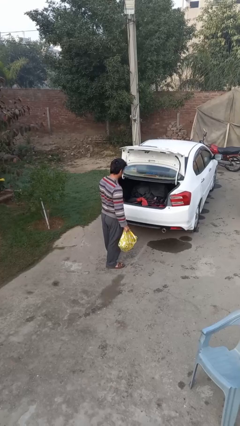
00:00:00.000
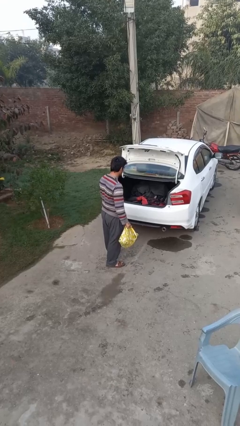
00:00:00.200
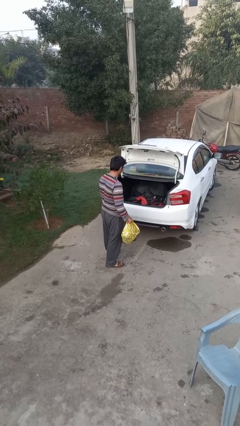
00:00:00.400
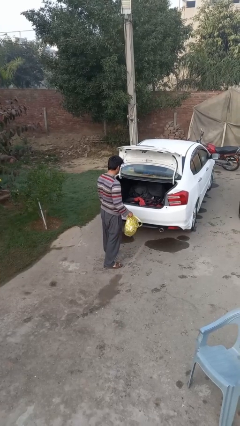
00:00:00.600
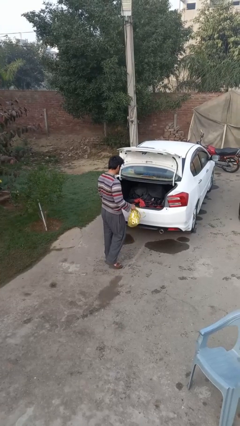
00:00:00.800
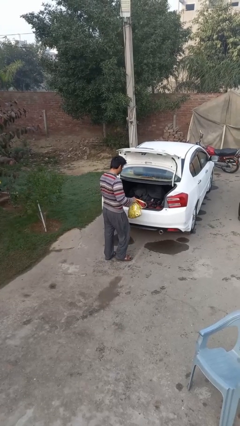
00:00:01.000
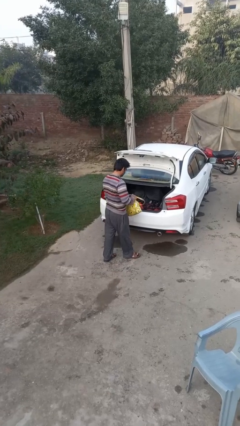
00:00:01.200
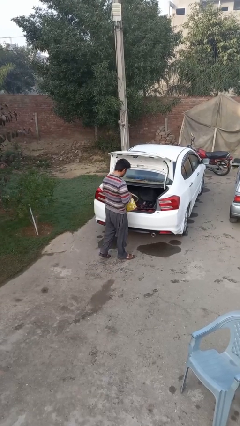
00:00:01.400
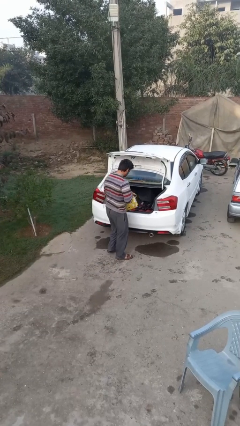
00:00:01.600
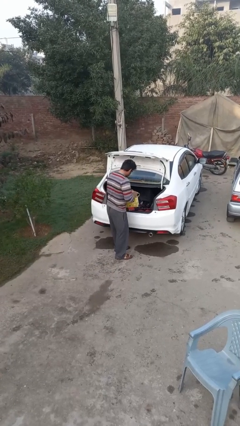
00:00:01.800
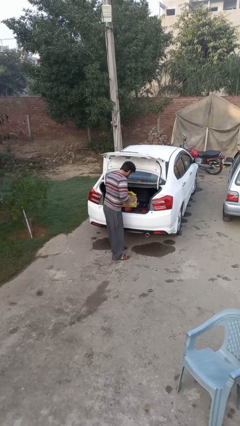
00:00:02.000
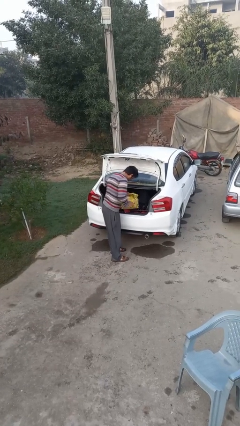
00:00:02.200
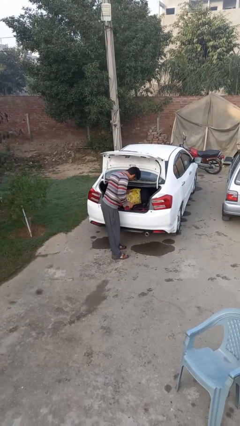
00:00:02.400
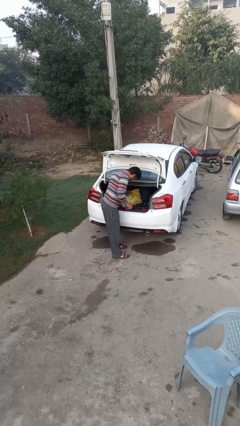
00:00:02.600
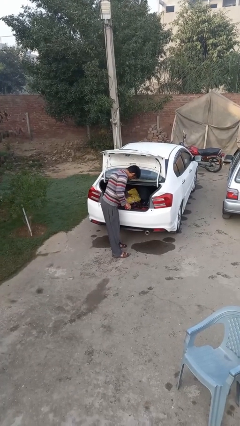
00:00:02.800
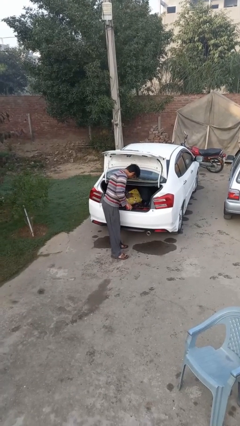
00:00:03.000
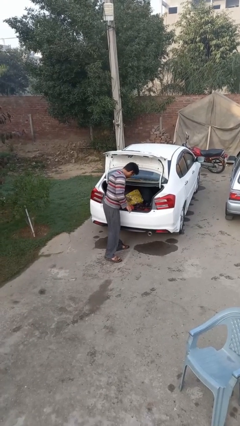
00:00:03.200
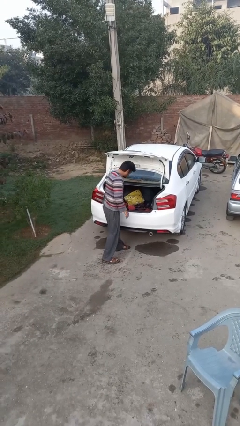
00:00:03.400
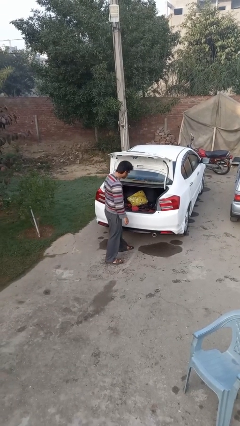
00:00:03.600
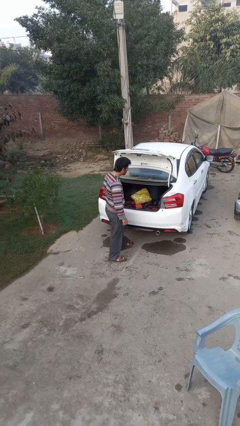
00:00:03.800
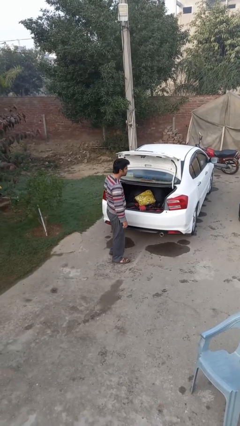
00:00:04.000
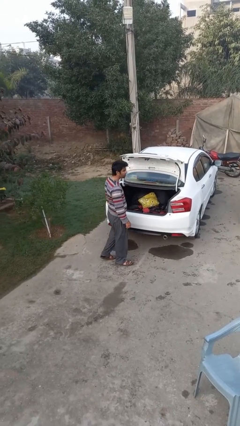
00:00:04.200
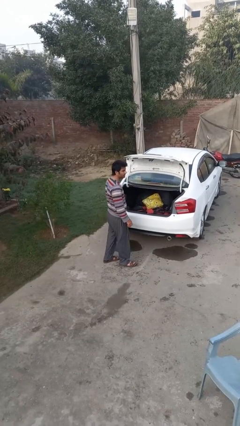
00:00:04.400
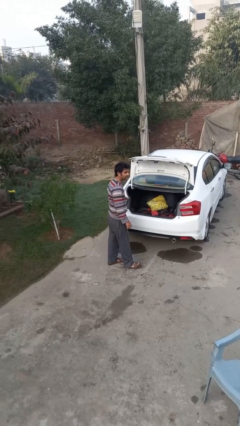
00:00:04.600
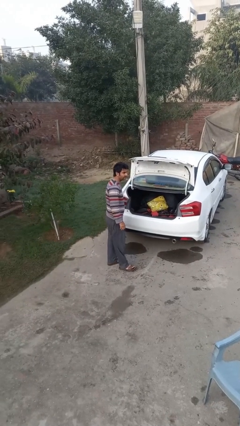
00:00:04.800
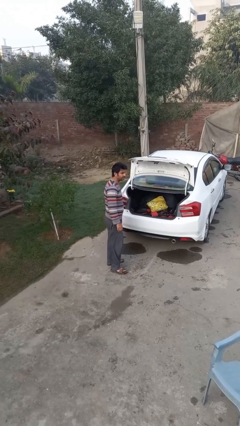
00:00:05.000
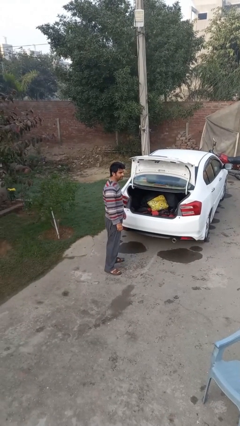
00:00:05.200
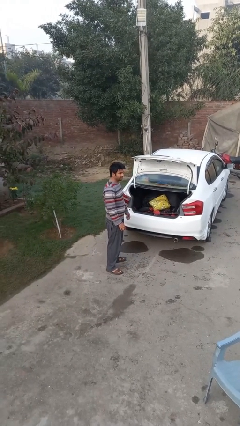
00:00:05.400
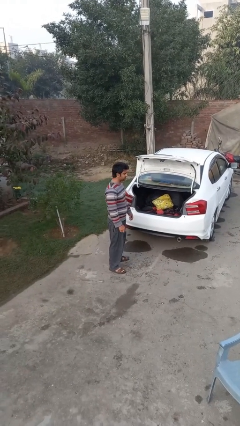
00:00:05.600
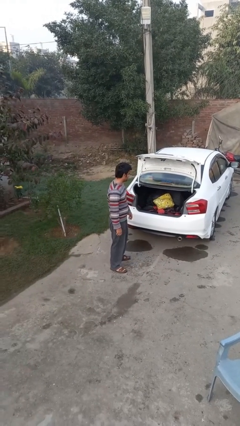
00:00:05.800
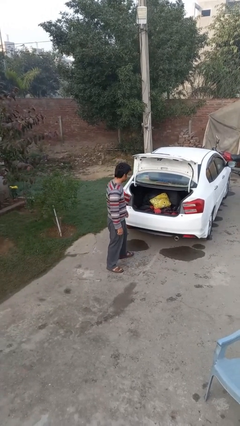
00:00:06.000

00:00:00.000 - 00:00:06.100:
person loads car

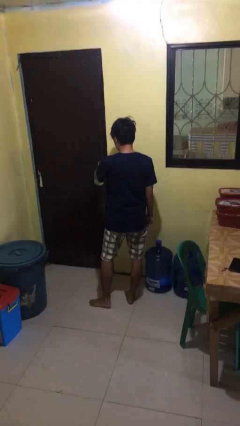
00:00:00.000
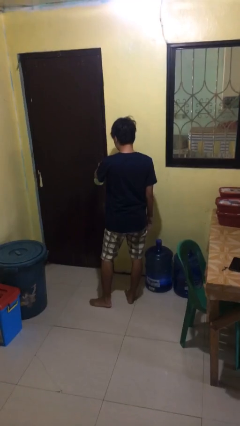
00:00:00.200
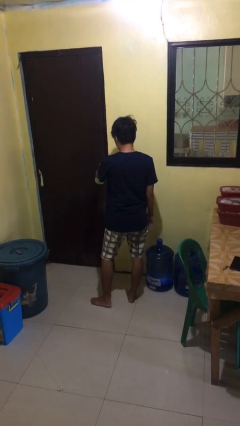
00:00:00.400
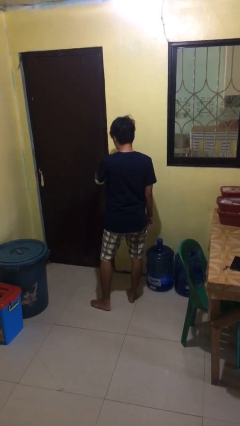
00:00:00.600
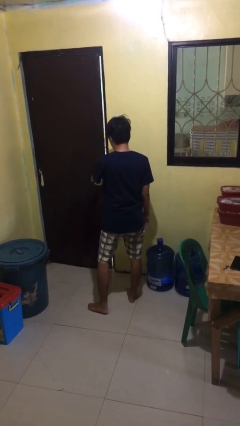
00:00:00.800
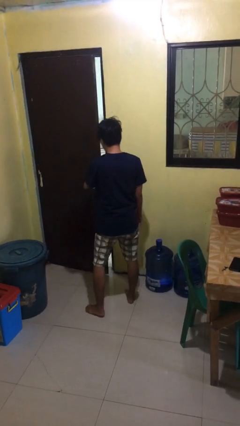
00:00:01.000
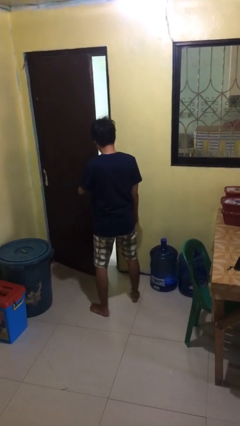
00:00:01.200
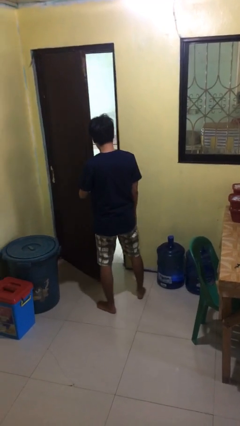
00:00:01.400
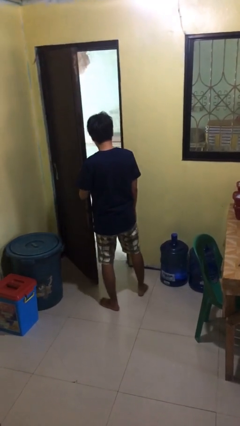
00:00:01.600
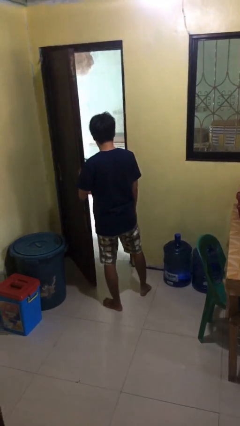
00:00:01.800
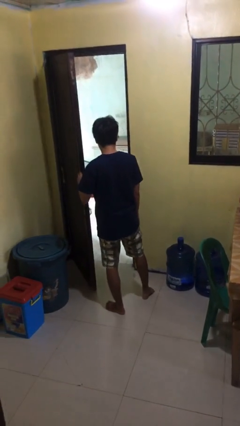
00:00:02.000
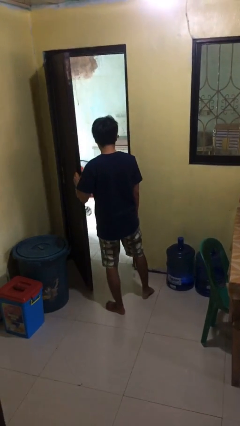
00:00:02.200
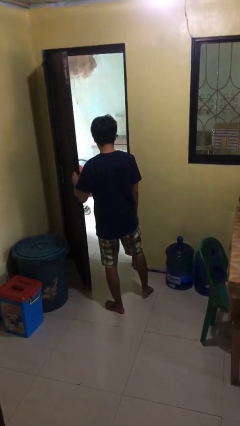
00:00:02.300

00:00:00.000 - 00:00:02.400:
person opens facility door

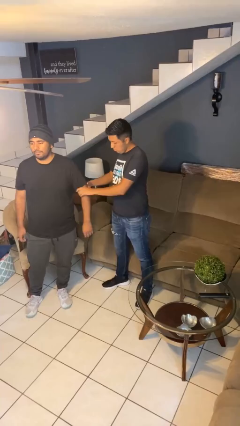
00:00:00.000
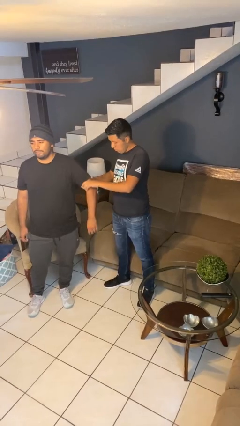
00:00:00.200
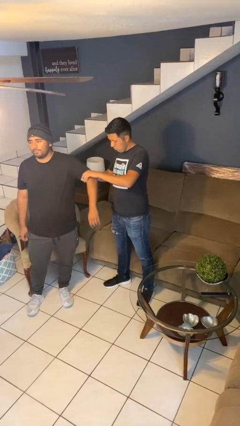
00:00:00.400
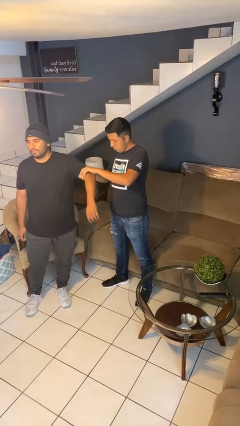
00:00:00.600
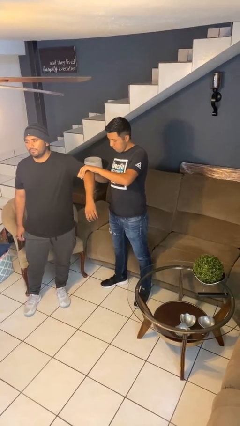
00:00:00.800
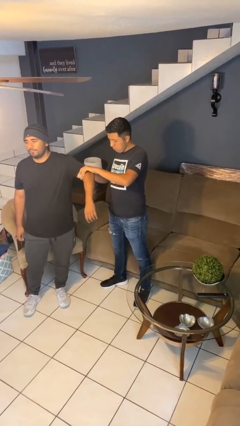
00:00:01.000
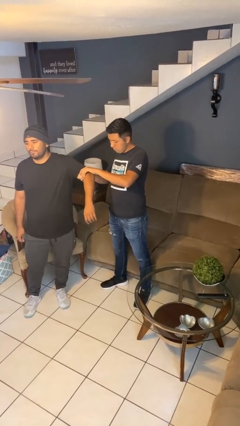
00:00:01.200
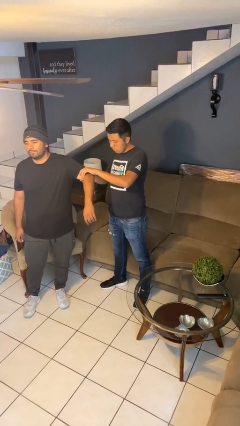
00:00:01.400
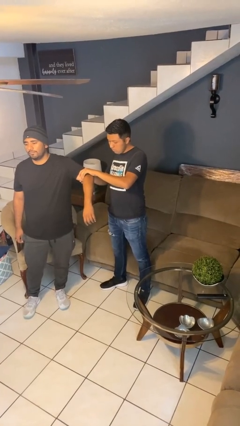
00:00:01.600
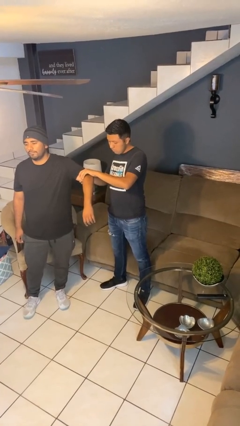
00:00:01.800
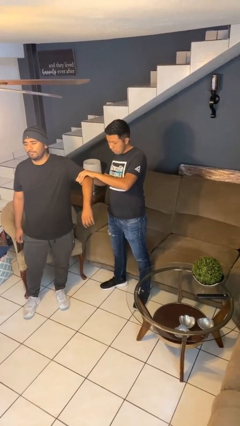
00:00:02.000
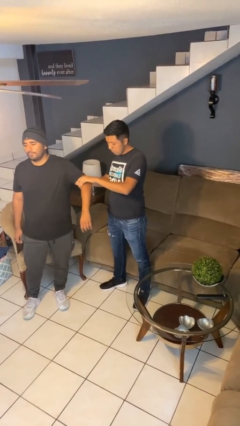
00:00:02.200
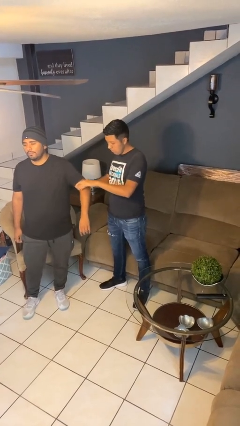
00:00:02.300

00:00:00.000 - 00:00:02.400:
person grabs person by bicep

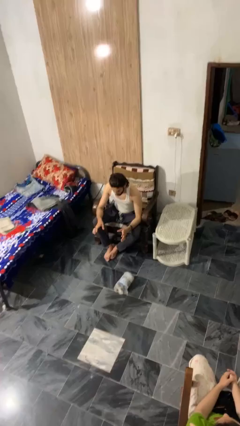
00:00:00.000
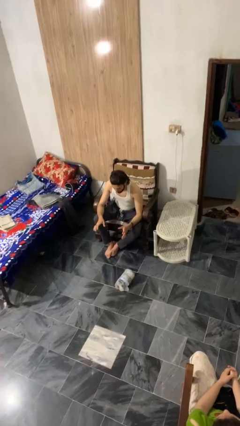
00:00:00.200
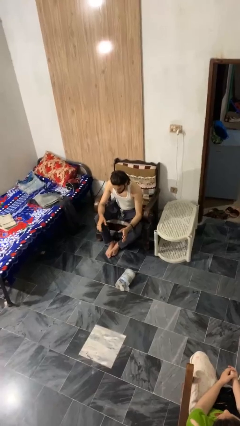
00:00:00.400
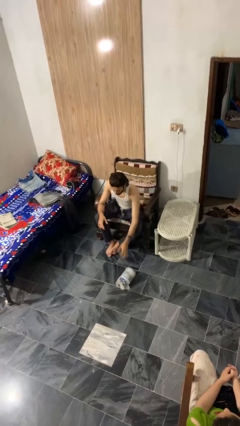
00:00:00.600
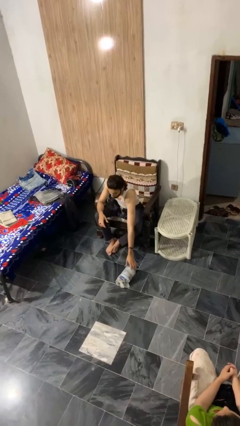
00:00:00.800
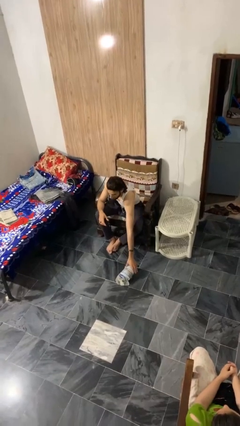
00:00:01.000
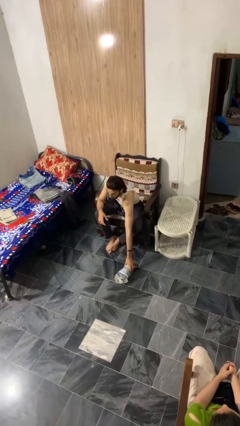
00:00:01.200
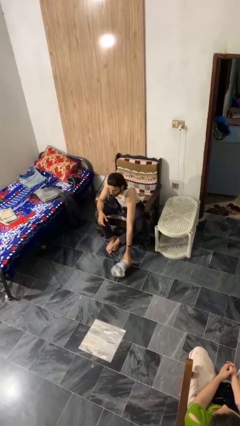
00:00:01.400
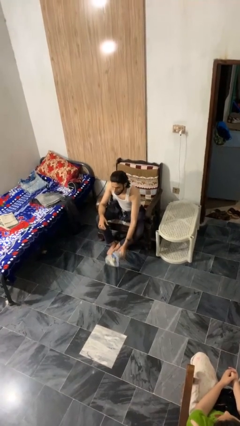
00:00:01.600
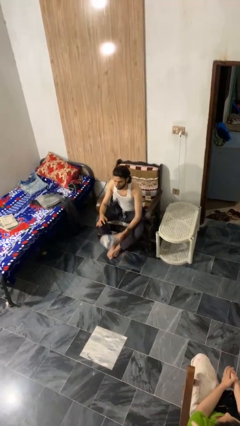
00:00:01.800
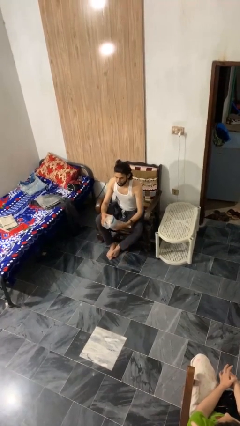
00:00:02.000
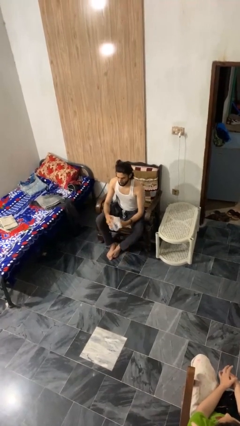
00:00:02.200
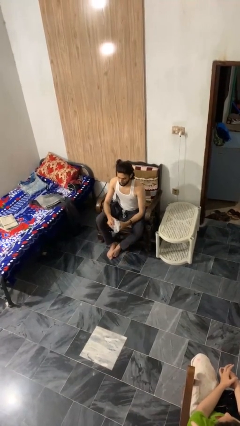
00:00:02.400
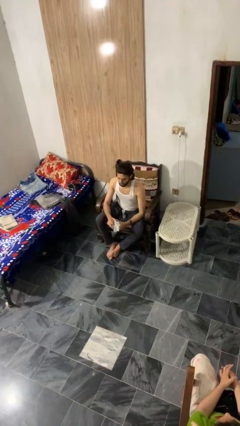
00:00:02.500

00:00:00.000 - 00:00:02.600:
person picks up object from floor

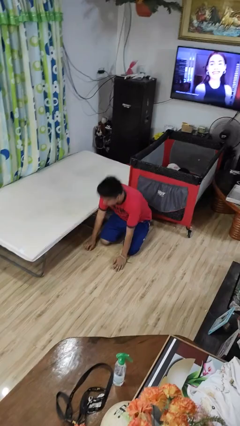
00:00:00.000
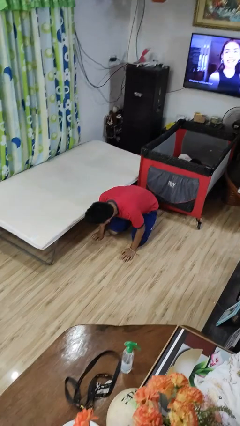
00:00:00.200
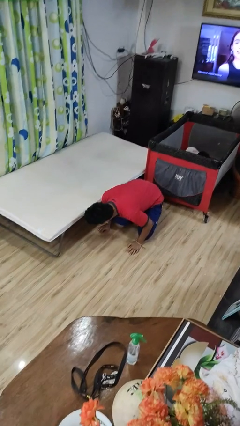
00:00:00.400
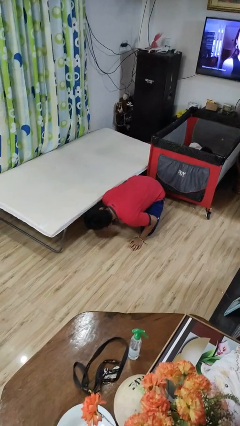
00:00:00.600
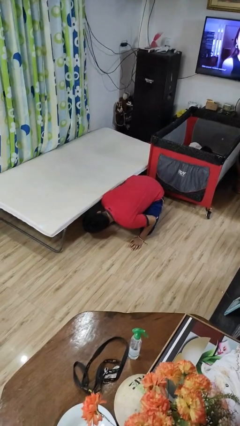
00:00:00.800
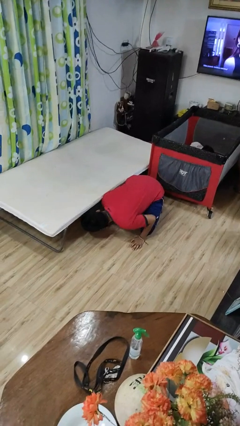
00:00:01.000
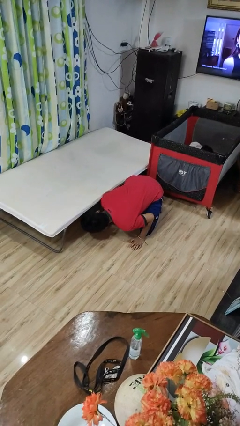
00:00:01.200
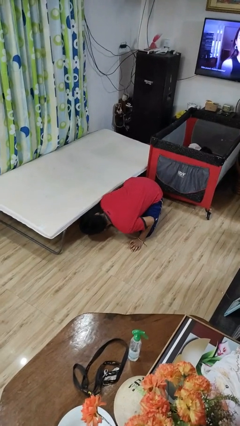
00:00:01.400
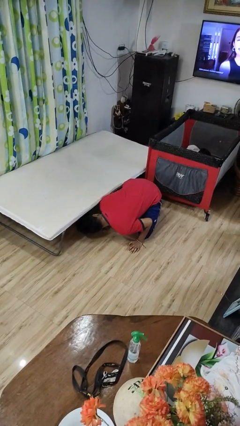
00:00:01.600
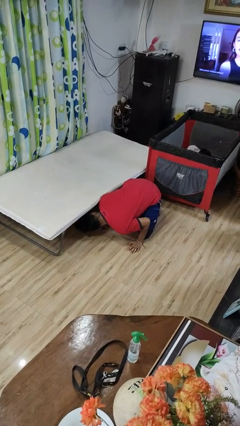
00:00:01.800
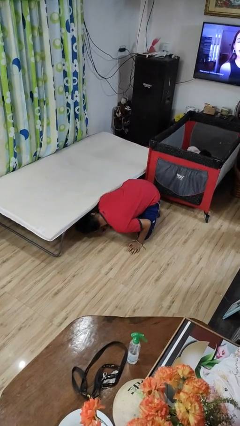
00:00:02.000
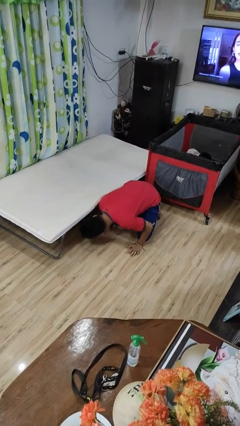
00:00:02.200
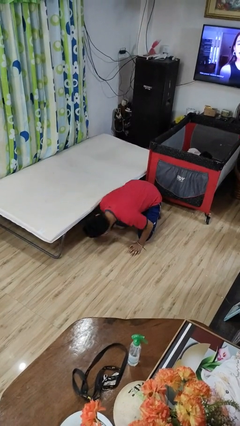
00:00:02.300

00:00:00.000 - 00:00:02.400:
person searches under bed

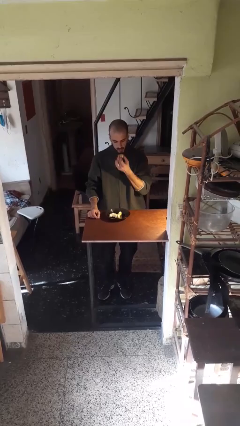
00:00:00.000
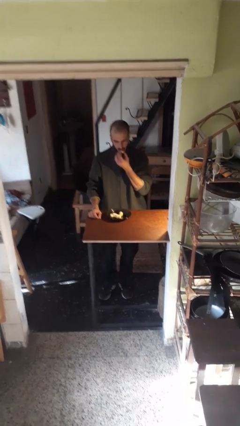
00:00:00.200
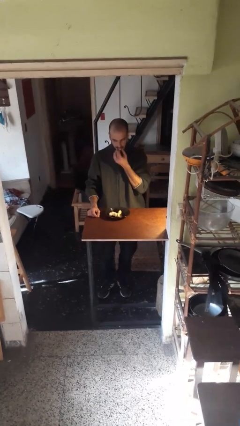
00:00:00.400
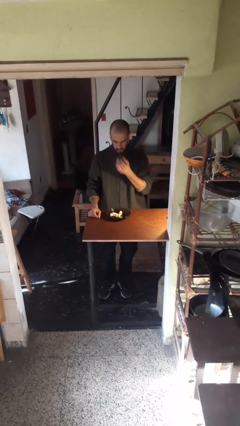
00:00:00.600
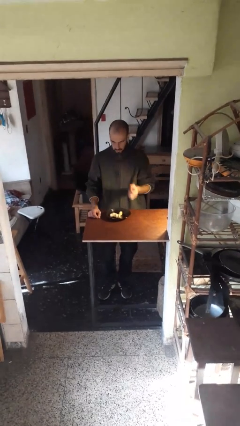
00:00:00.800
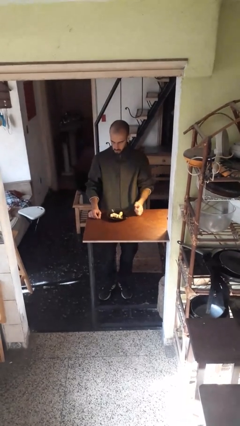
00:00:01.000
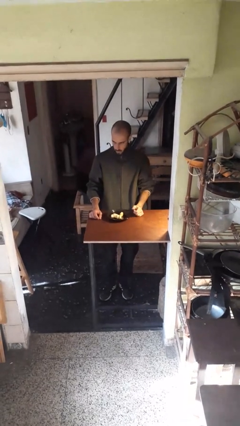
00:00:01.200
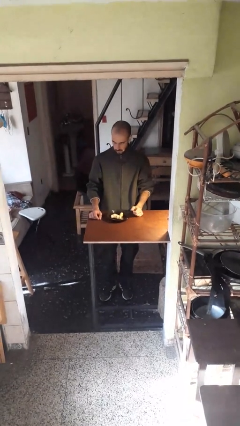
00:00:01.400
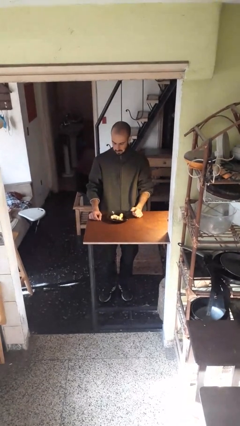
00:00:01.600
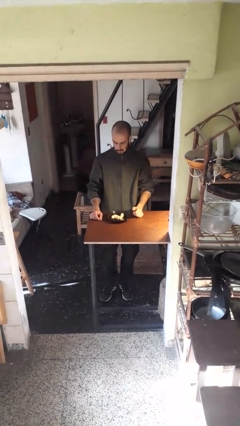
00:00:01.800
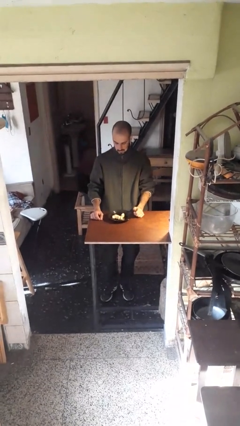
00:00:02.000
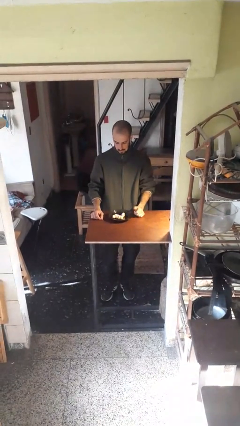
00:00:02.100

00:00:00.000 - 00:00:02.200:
person eats with hands
